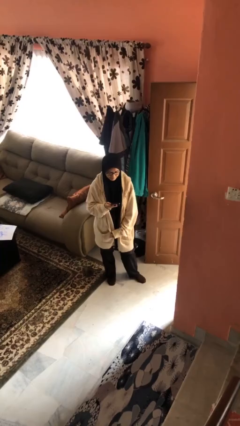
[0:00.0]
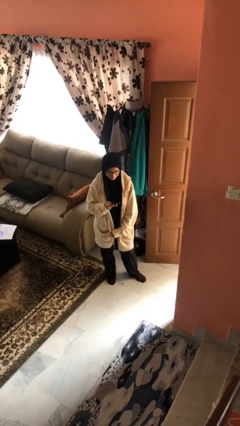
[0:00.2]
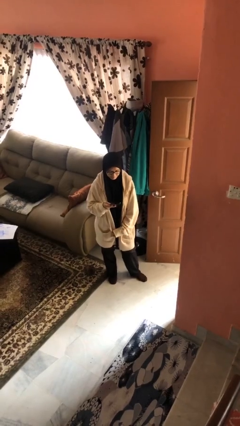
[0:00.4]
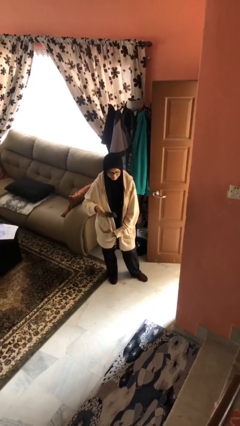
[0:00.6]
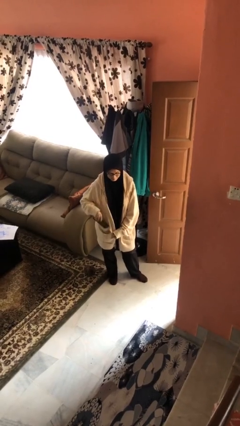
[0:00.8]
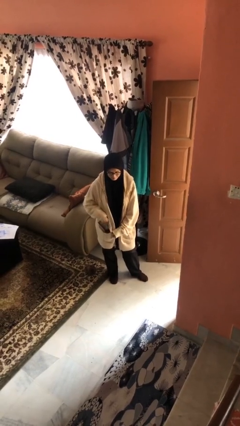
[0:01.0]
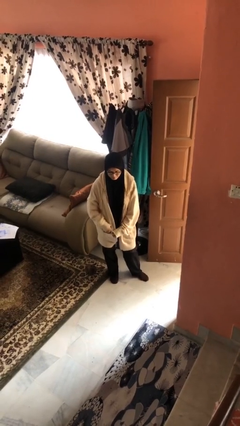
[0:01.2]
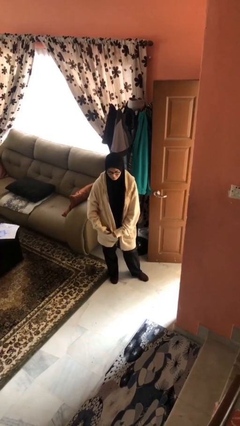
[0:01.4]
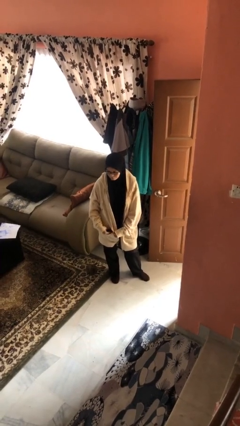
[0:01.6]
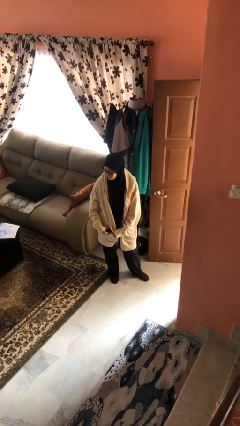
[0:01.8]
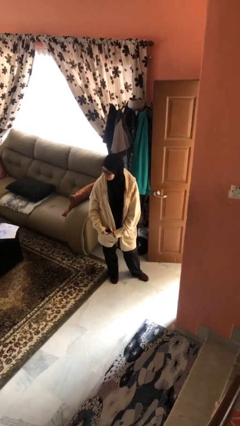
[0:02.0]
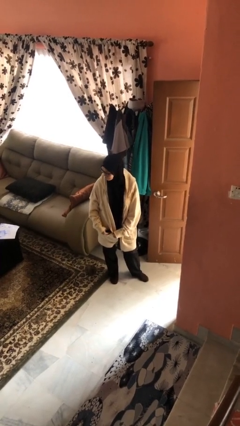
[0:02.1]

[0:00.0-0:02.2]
person puts phone into pocket

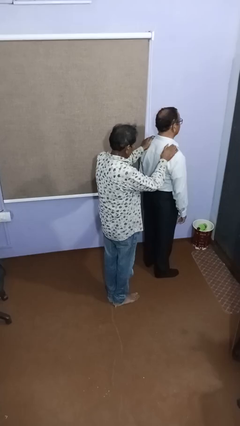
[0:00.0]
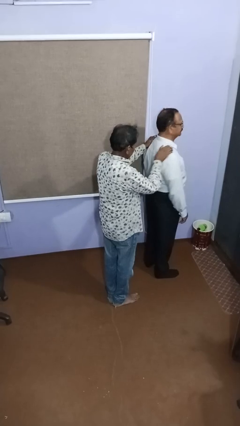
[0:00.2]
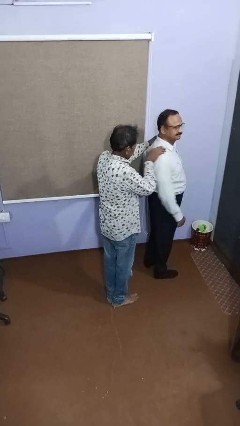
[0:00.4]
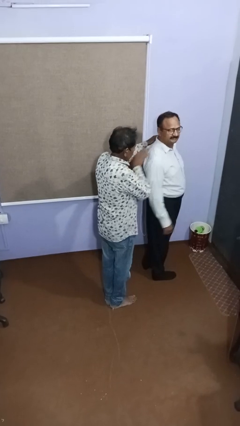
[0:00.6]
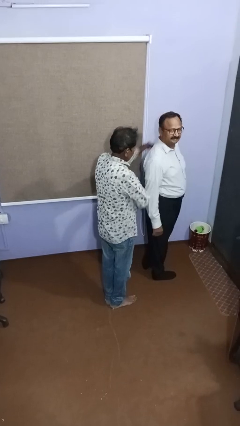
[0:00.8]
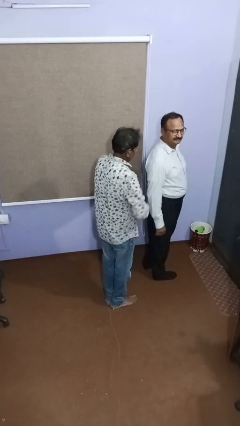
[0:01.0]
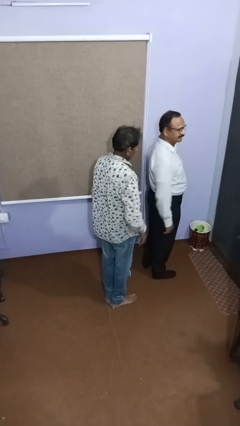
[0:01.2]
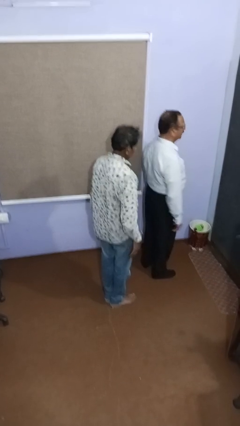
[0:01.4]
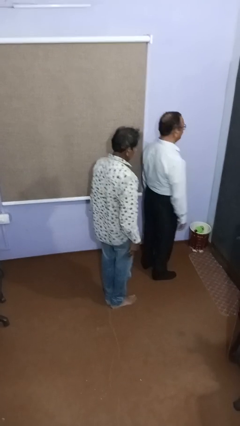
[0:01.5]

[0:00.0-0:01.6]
person spins person around

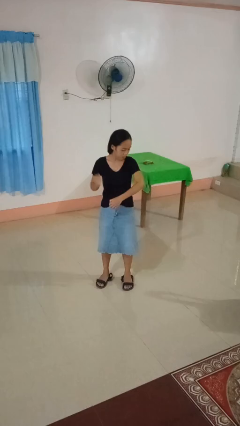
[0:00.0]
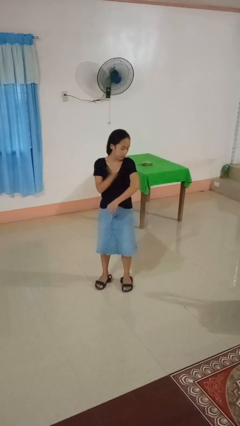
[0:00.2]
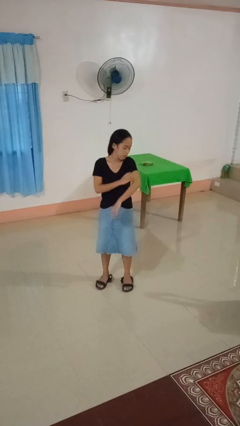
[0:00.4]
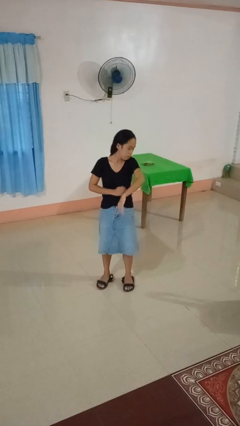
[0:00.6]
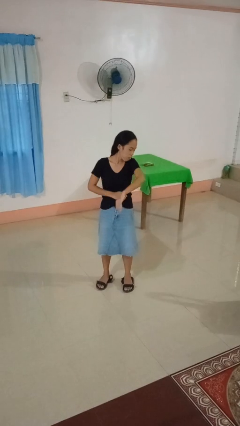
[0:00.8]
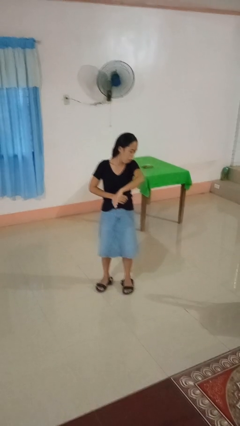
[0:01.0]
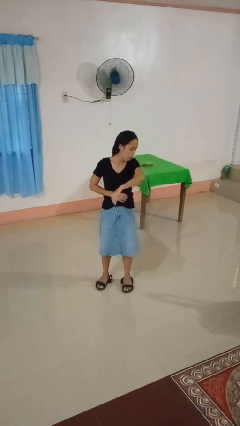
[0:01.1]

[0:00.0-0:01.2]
person swats bug

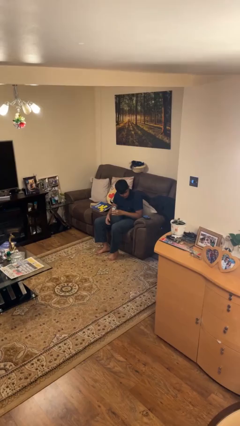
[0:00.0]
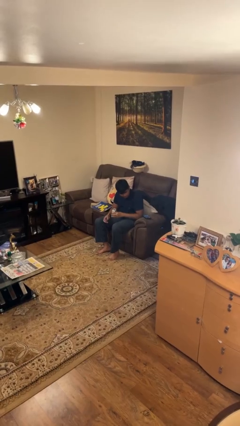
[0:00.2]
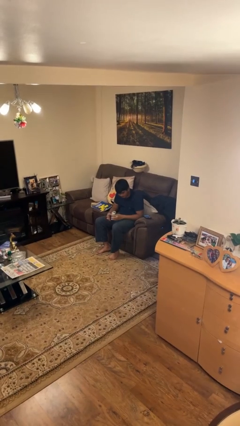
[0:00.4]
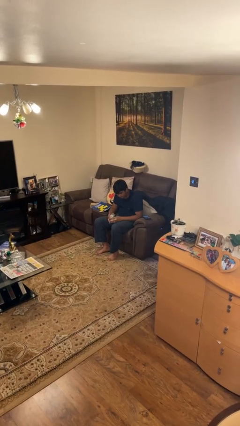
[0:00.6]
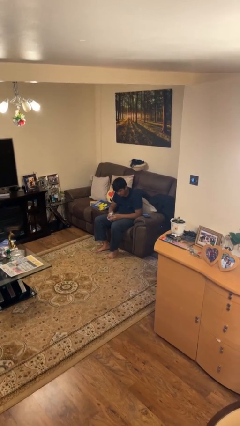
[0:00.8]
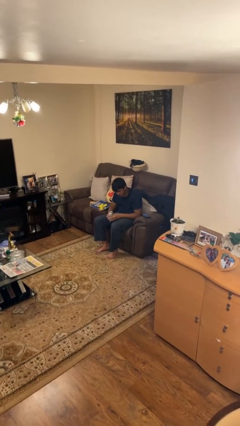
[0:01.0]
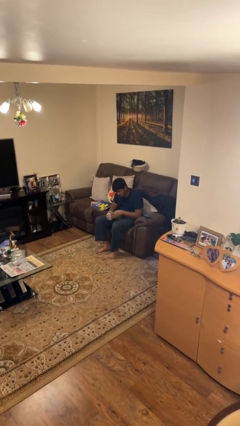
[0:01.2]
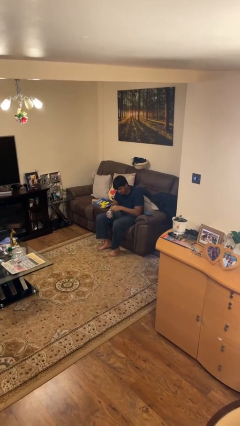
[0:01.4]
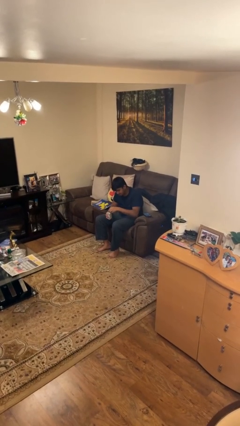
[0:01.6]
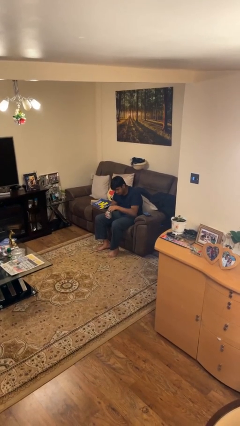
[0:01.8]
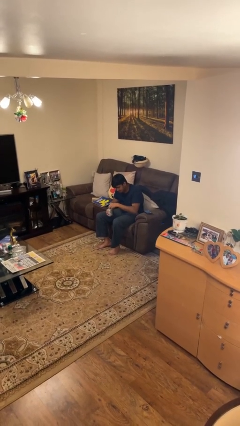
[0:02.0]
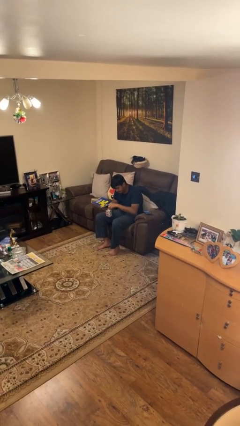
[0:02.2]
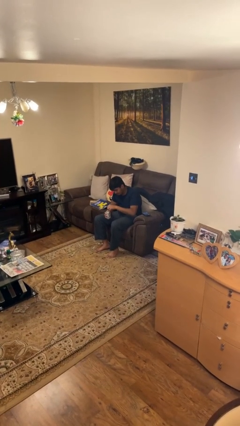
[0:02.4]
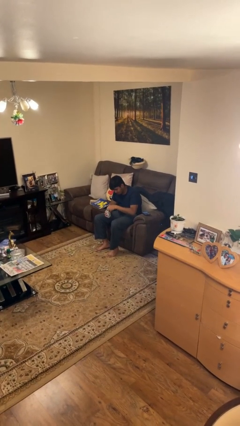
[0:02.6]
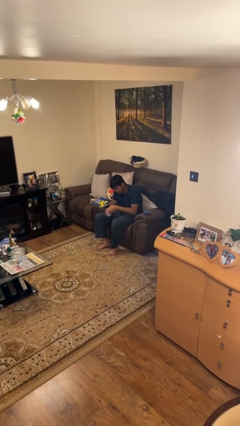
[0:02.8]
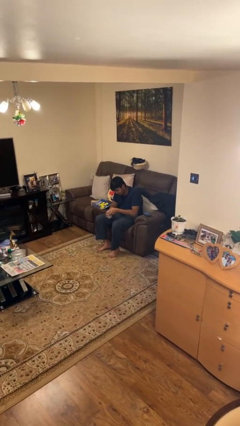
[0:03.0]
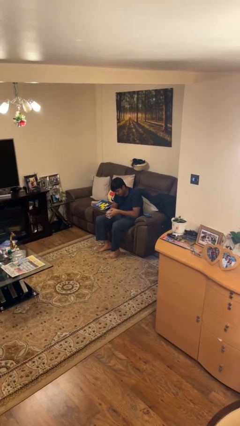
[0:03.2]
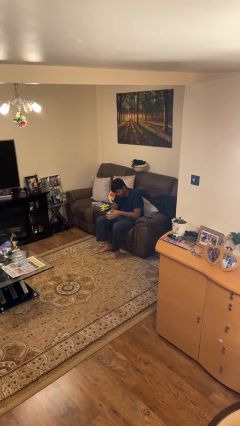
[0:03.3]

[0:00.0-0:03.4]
person opens beverage can

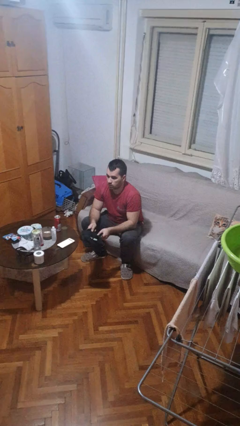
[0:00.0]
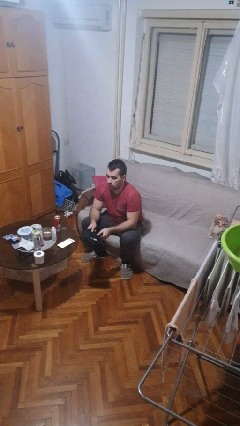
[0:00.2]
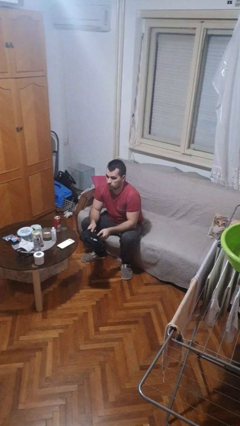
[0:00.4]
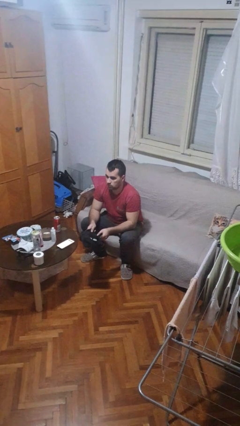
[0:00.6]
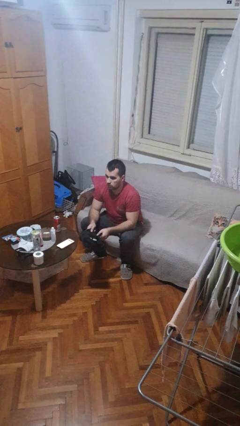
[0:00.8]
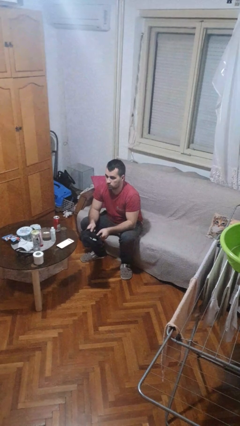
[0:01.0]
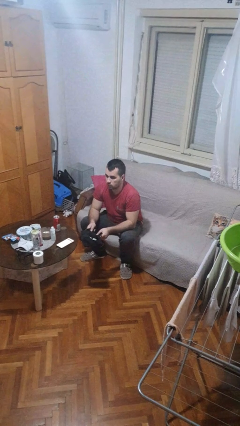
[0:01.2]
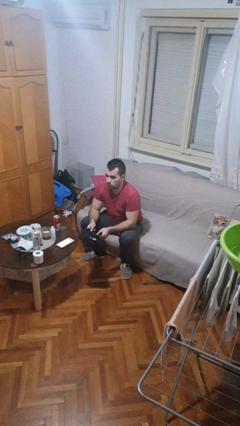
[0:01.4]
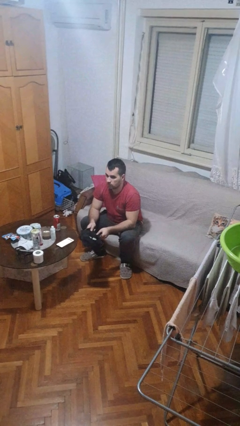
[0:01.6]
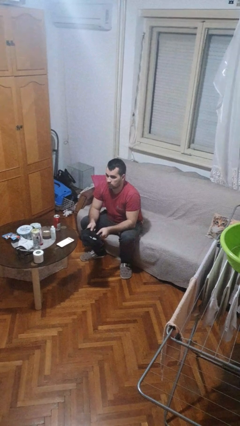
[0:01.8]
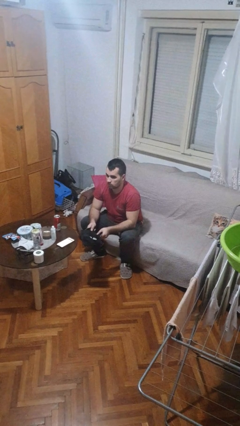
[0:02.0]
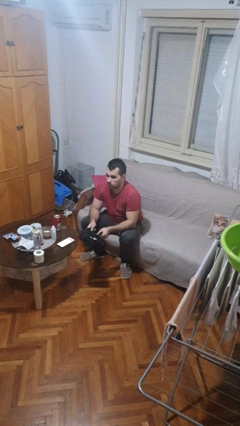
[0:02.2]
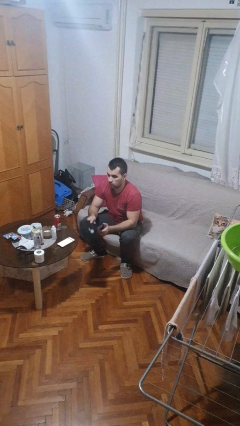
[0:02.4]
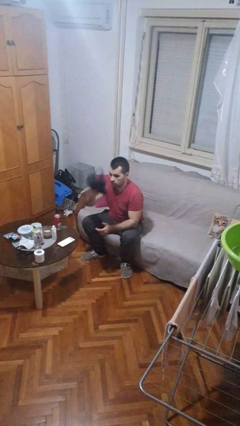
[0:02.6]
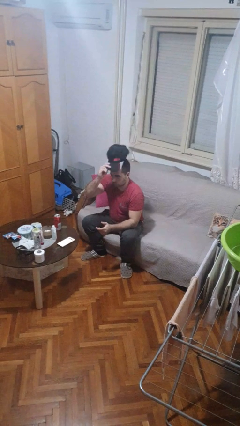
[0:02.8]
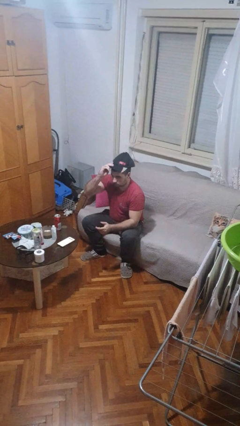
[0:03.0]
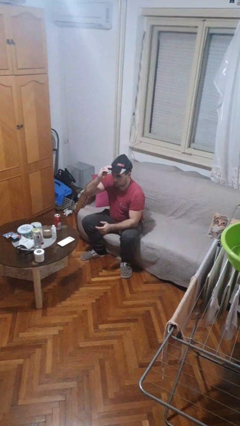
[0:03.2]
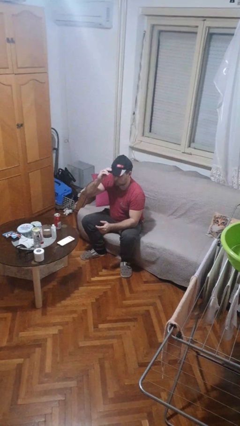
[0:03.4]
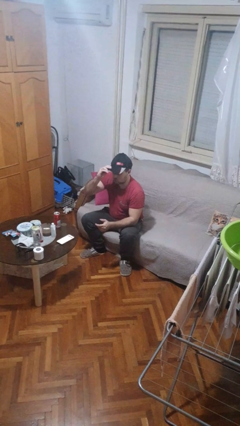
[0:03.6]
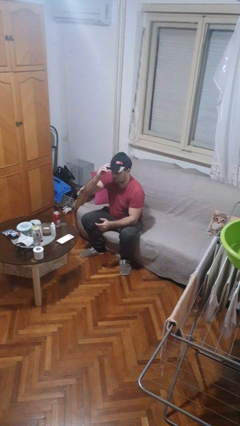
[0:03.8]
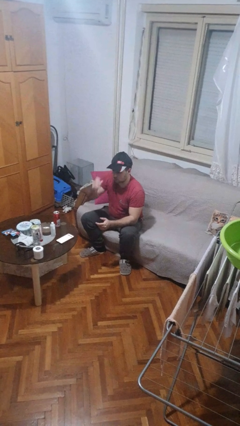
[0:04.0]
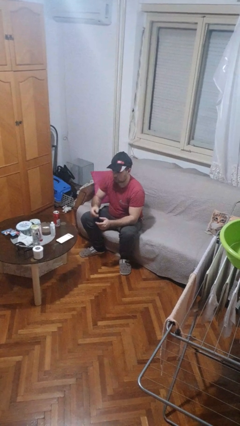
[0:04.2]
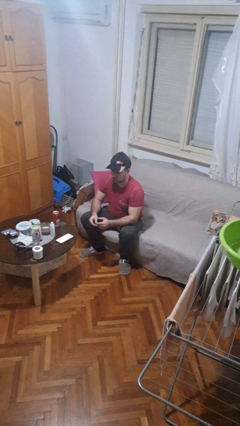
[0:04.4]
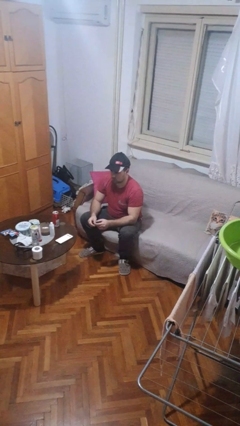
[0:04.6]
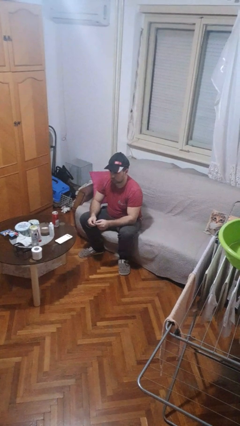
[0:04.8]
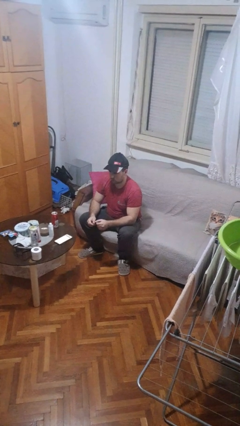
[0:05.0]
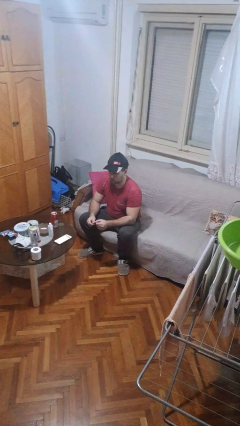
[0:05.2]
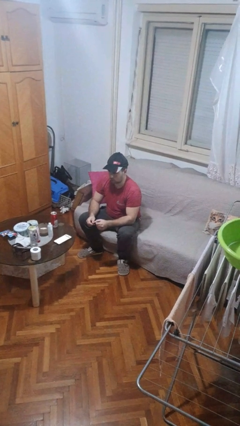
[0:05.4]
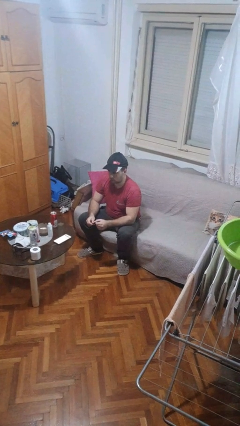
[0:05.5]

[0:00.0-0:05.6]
person puts on hat

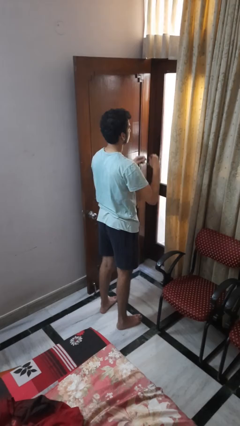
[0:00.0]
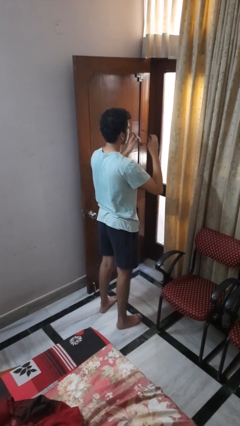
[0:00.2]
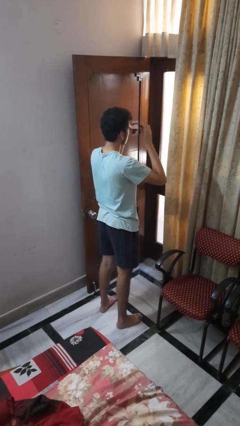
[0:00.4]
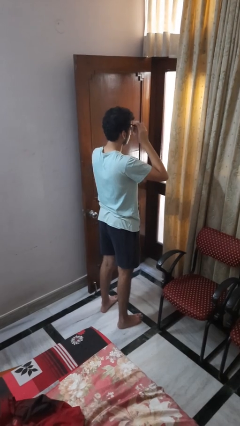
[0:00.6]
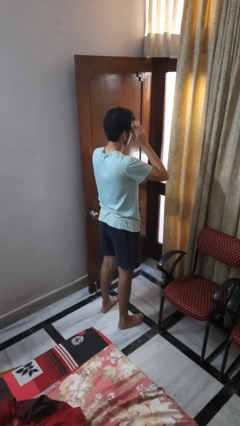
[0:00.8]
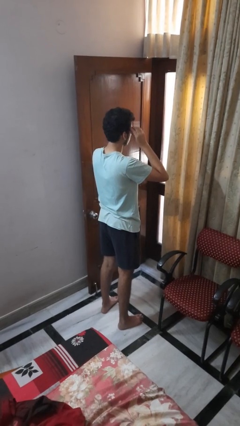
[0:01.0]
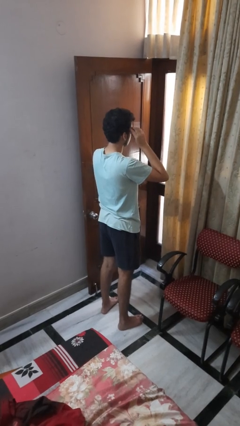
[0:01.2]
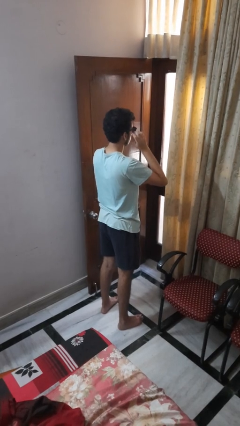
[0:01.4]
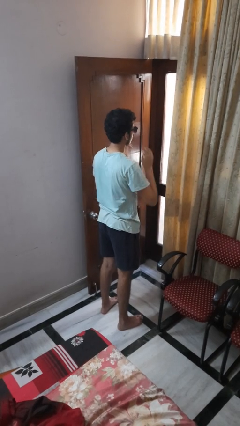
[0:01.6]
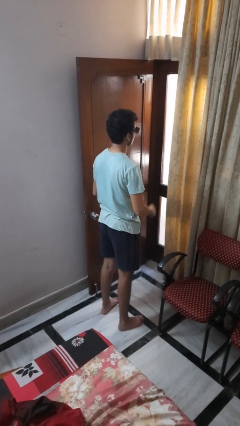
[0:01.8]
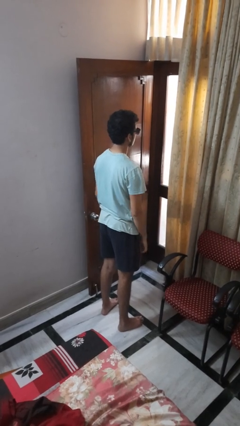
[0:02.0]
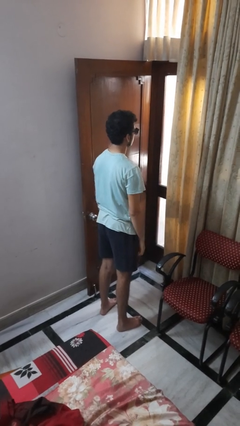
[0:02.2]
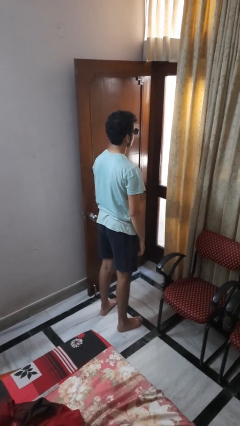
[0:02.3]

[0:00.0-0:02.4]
person puts on sunglasses

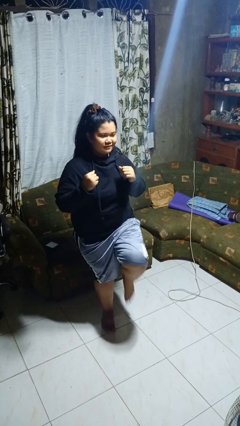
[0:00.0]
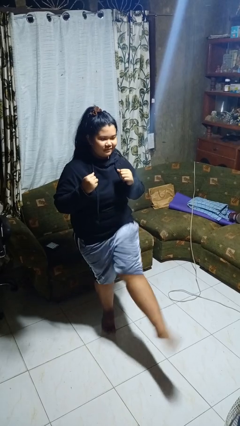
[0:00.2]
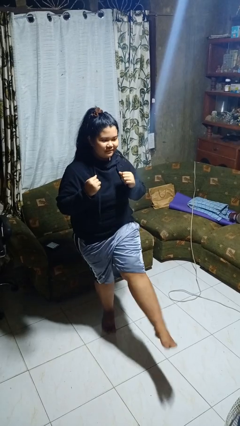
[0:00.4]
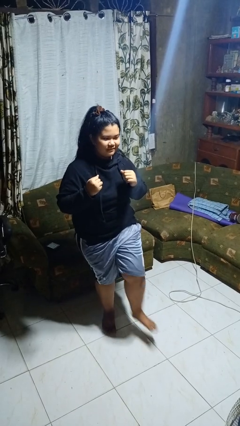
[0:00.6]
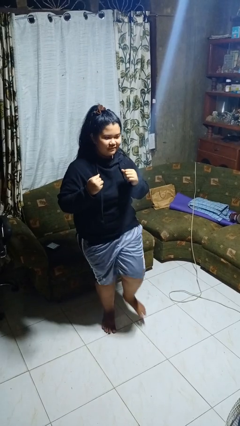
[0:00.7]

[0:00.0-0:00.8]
person karate kicks
